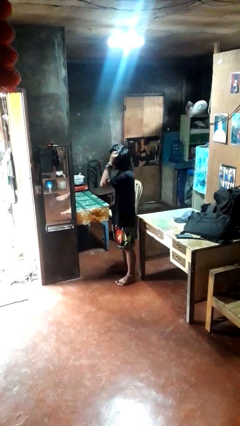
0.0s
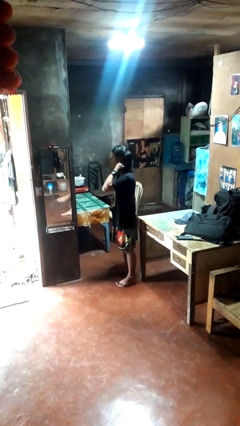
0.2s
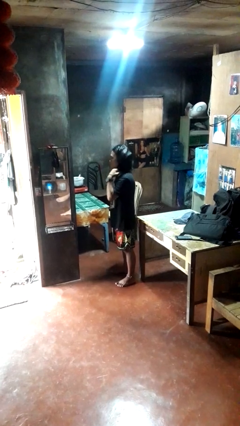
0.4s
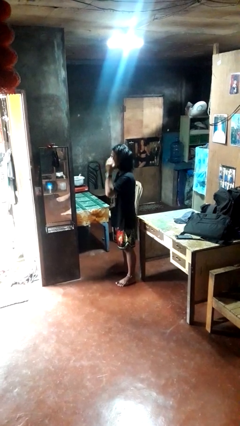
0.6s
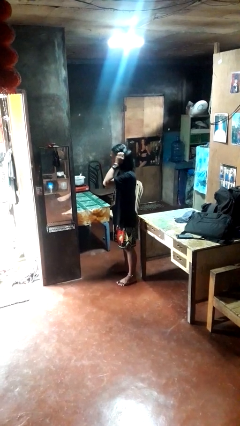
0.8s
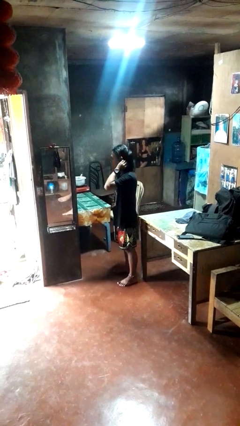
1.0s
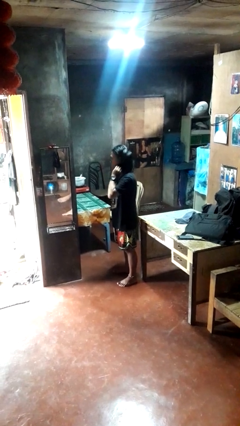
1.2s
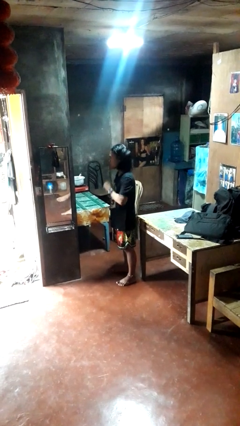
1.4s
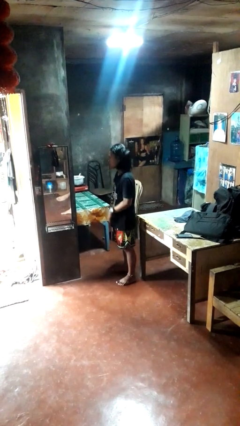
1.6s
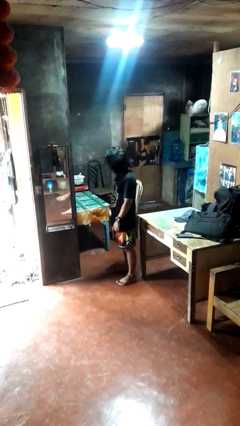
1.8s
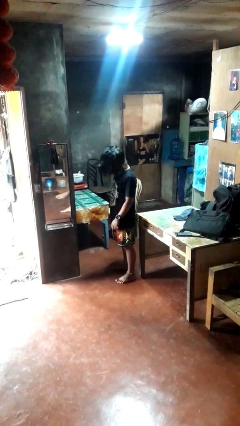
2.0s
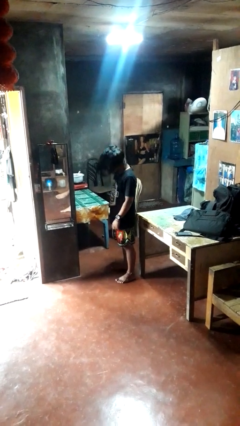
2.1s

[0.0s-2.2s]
person strokes hair

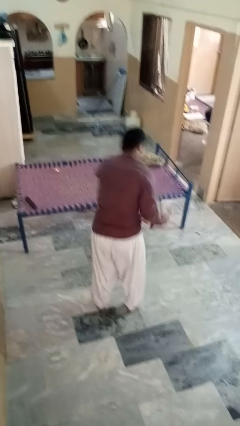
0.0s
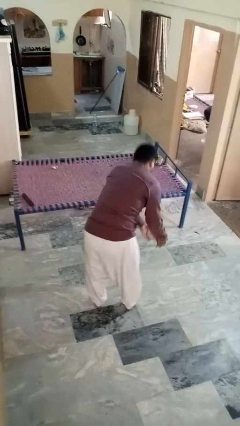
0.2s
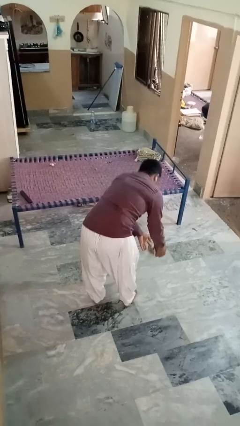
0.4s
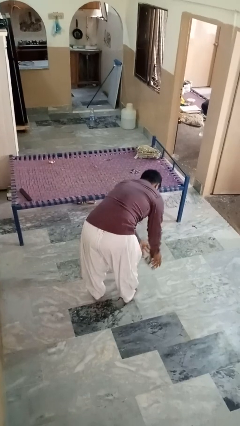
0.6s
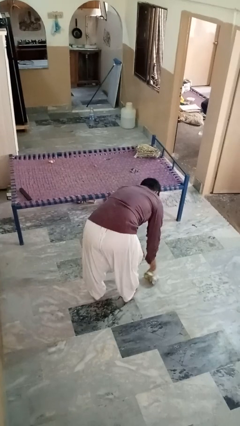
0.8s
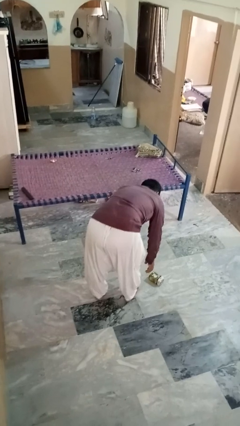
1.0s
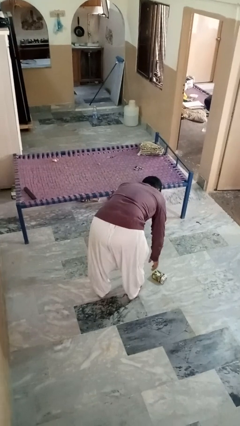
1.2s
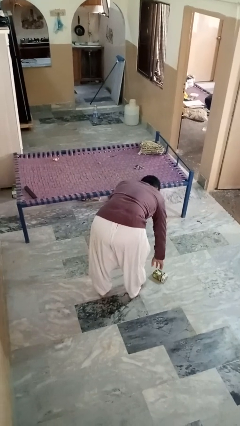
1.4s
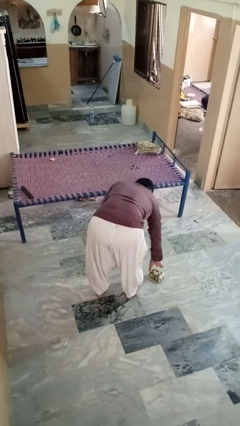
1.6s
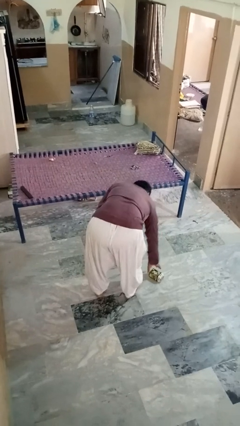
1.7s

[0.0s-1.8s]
person catches dropped object

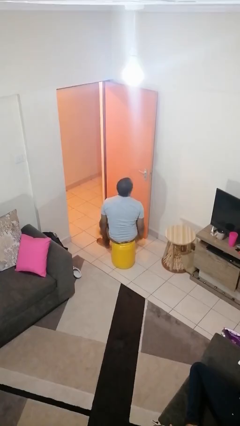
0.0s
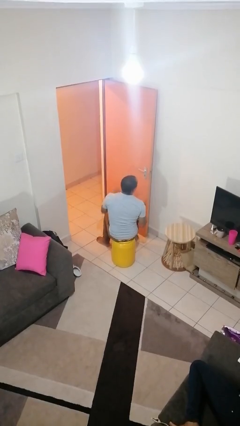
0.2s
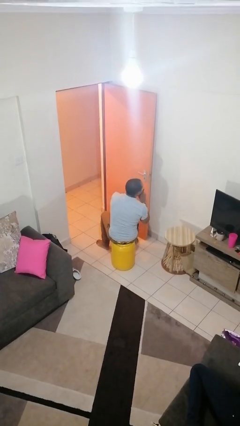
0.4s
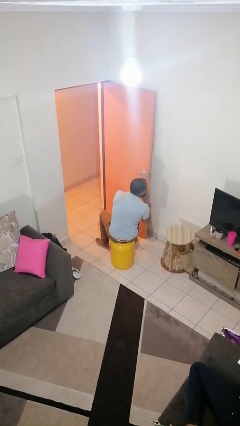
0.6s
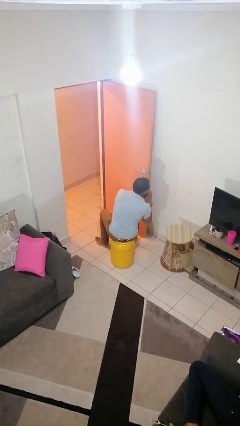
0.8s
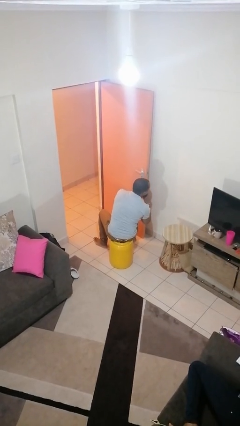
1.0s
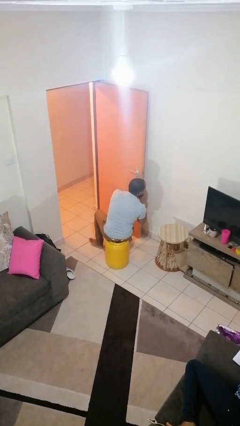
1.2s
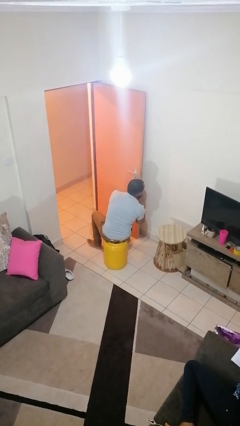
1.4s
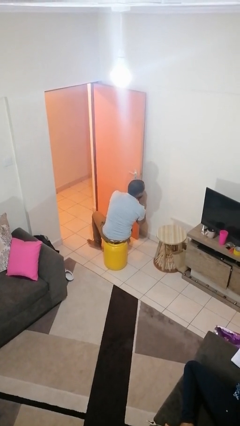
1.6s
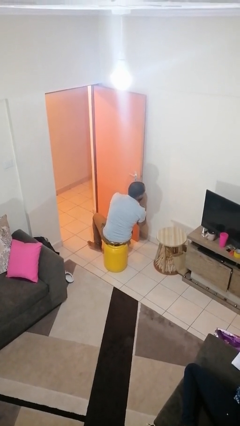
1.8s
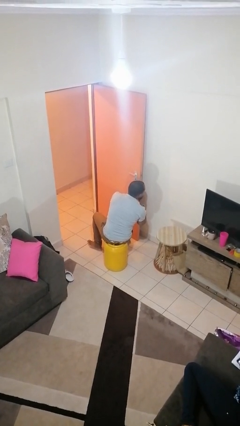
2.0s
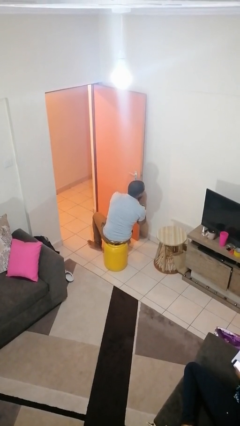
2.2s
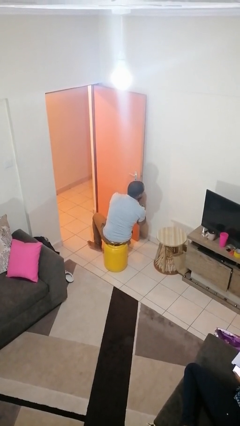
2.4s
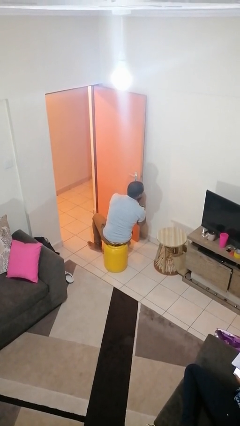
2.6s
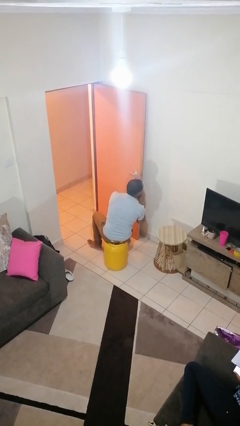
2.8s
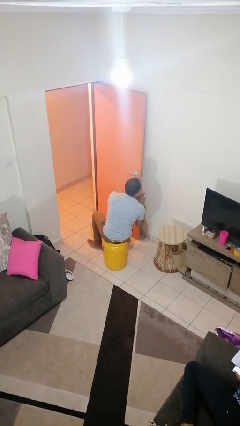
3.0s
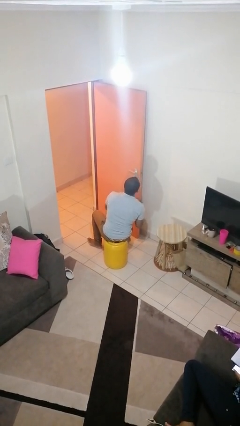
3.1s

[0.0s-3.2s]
person gestures be quiet

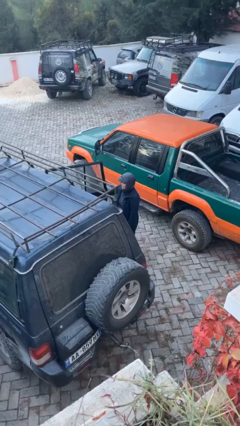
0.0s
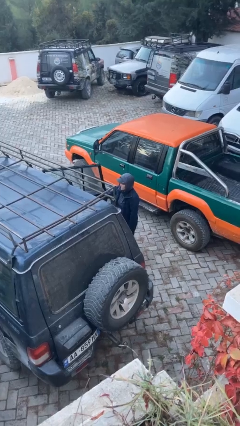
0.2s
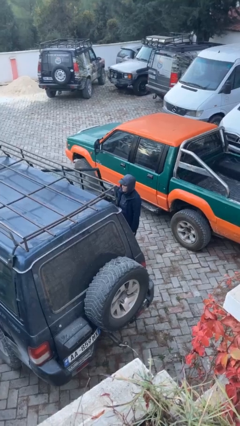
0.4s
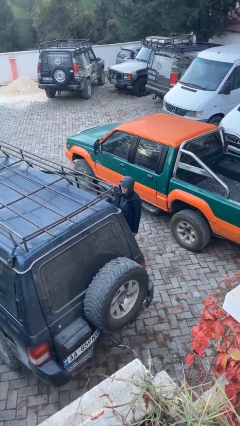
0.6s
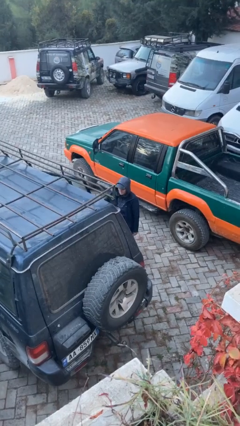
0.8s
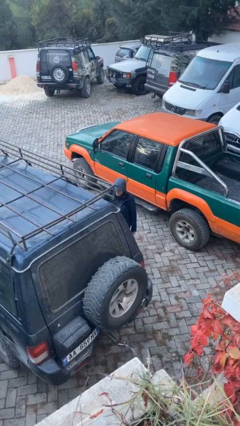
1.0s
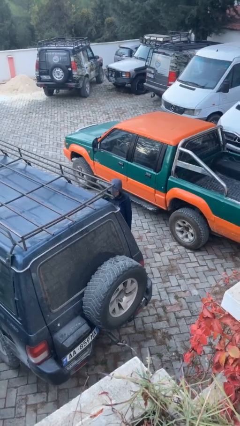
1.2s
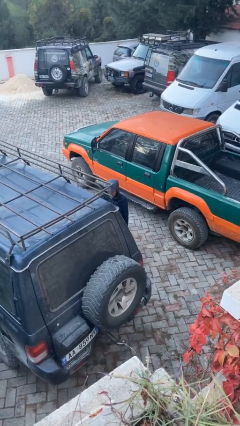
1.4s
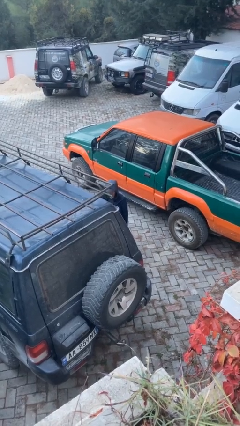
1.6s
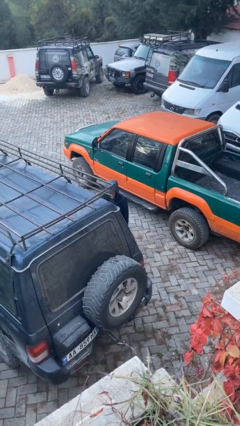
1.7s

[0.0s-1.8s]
person closes car door

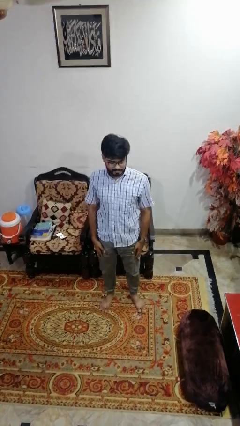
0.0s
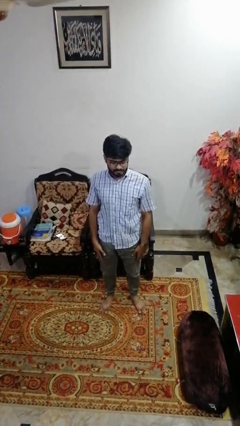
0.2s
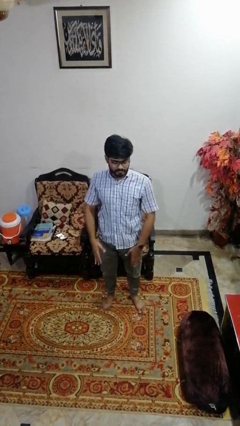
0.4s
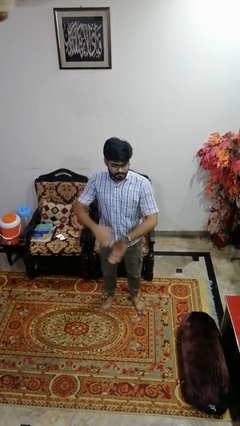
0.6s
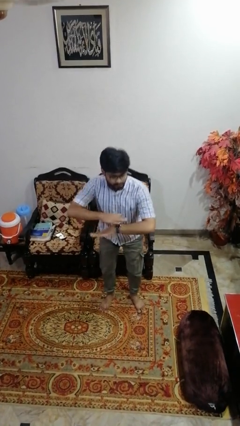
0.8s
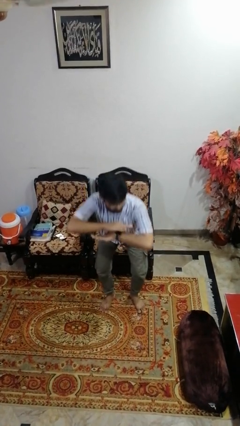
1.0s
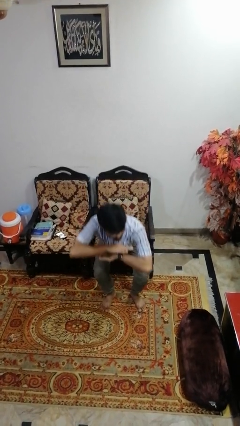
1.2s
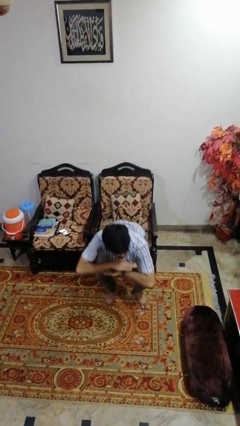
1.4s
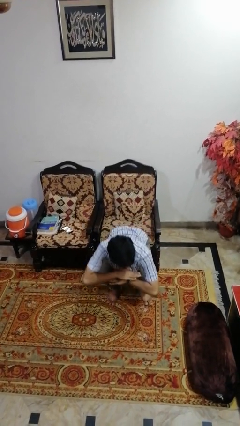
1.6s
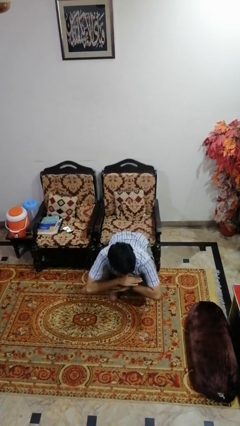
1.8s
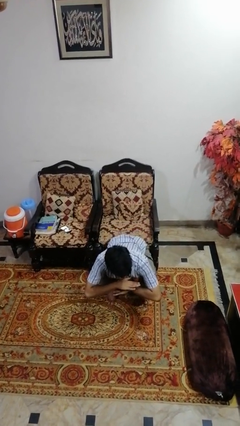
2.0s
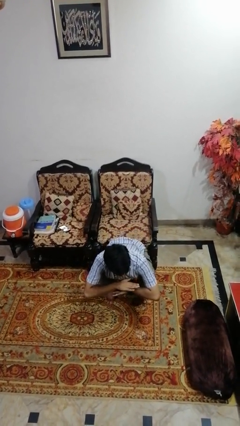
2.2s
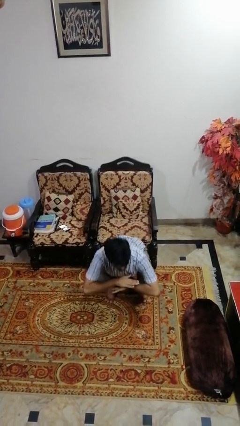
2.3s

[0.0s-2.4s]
person squats

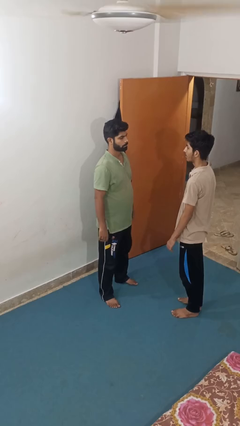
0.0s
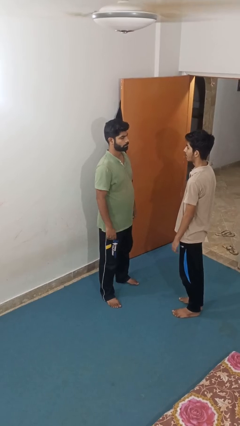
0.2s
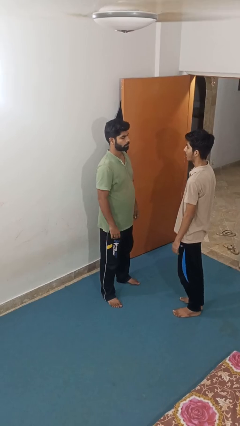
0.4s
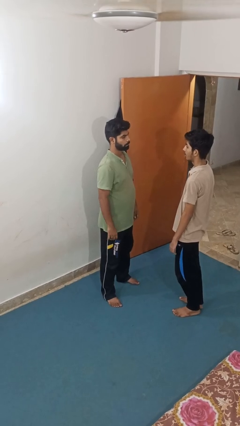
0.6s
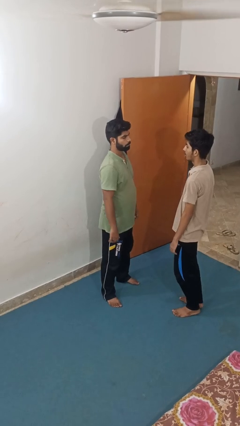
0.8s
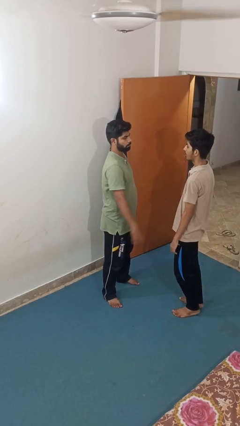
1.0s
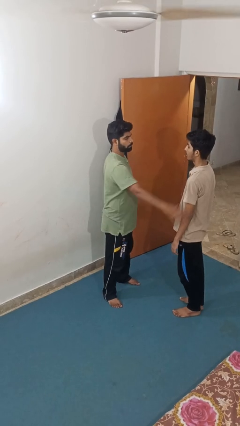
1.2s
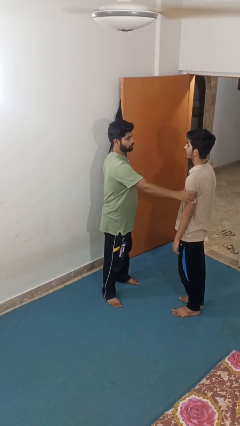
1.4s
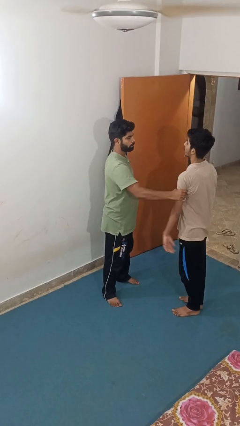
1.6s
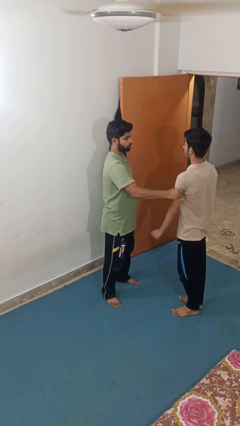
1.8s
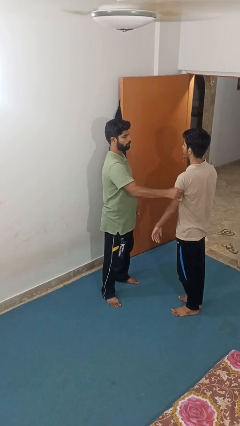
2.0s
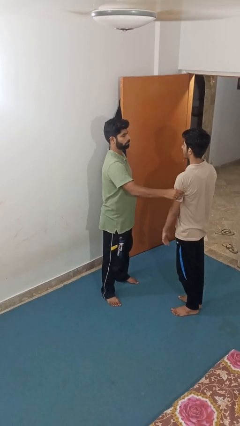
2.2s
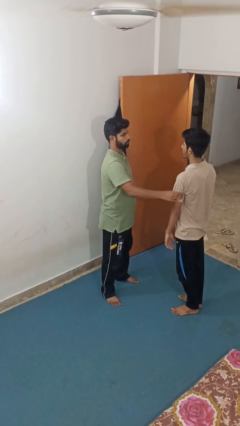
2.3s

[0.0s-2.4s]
person grabs person by bicep

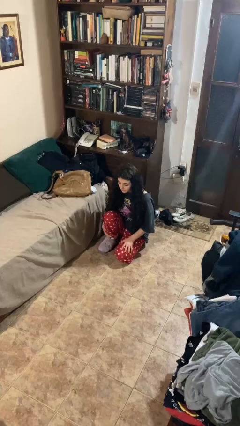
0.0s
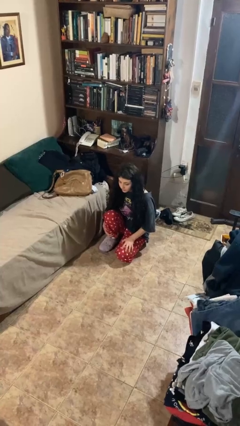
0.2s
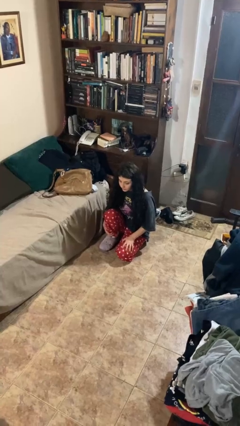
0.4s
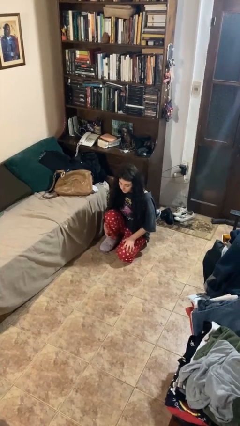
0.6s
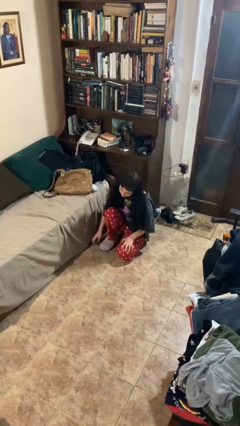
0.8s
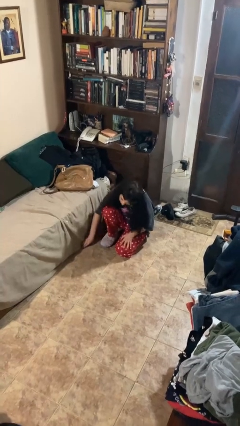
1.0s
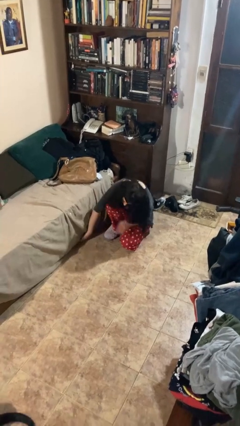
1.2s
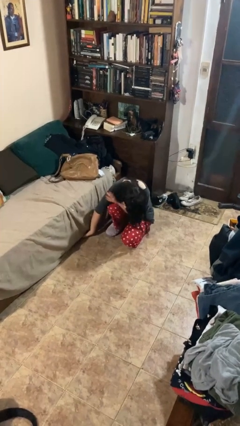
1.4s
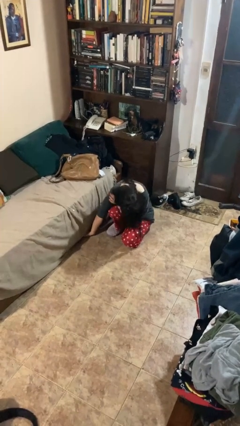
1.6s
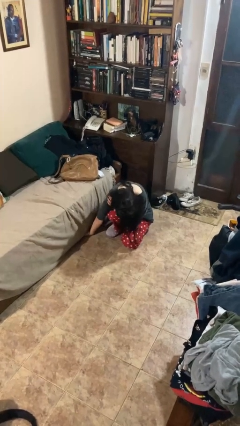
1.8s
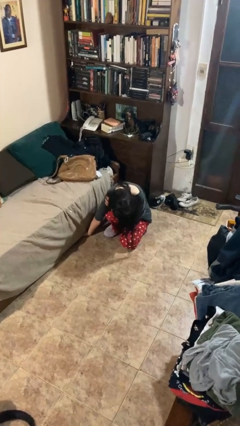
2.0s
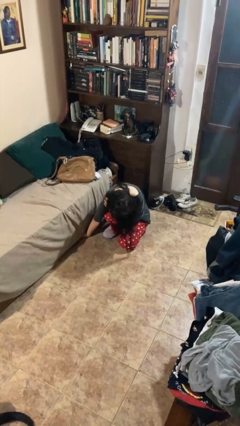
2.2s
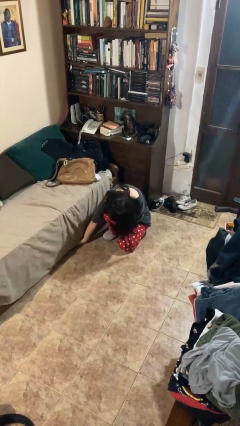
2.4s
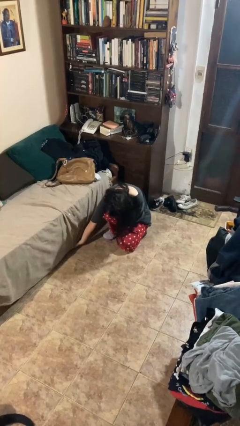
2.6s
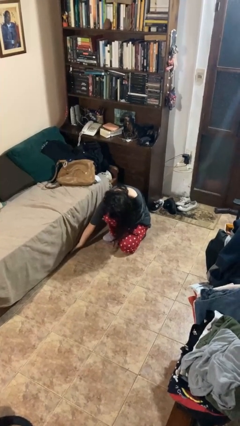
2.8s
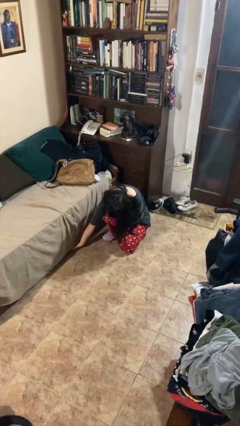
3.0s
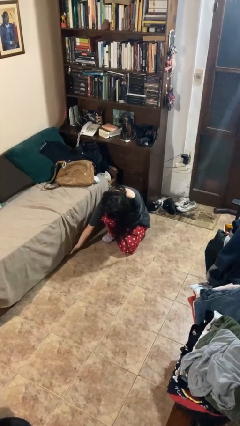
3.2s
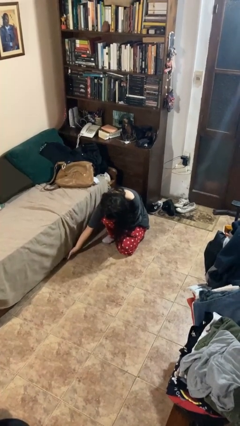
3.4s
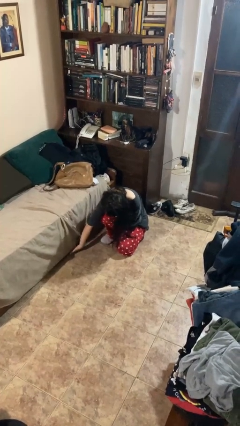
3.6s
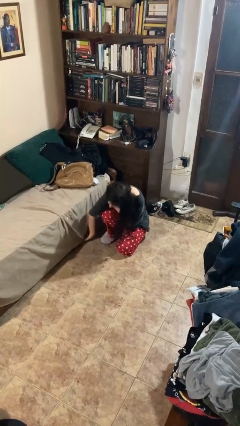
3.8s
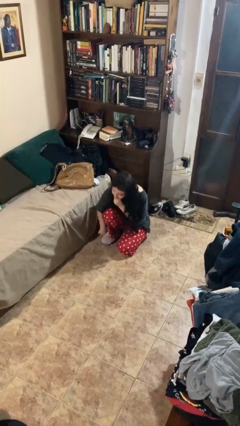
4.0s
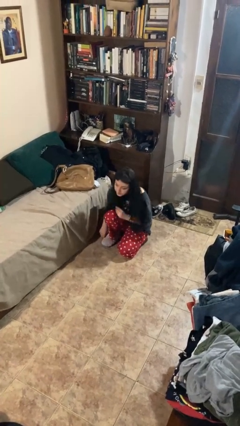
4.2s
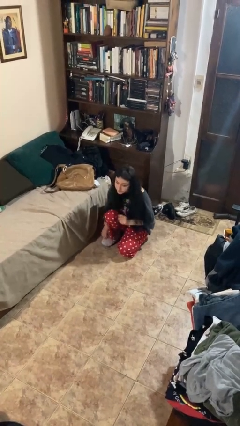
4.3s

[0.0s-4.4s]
person searches under couch
